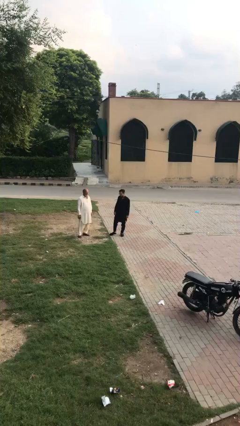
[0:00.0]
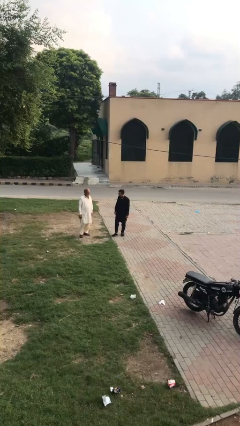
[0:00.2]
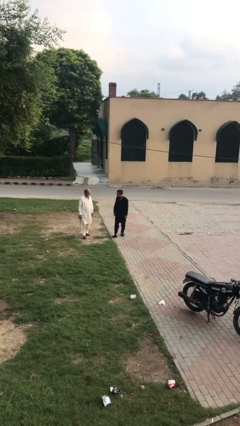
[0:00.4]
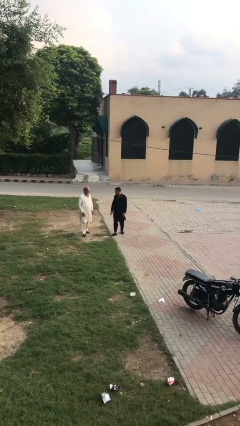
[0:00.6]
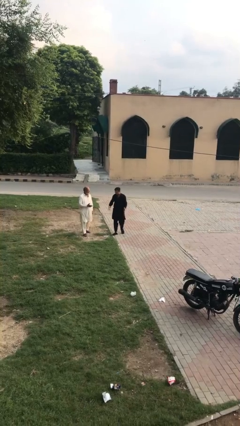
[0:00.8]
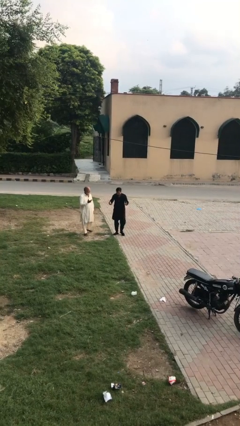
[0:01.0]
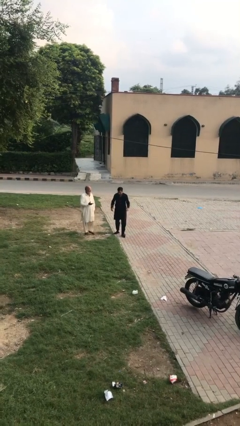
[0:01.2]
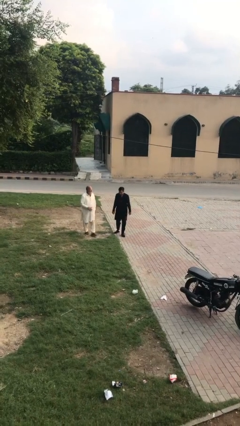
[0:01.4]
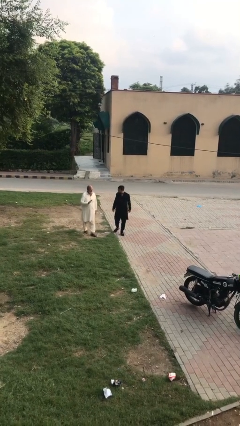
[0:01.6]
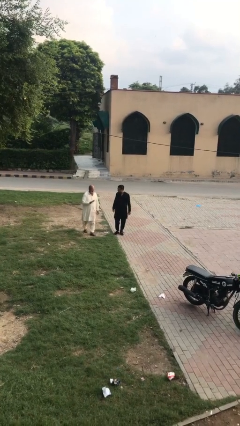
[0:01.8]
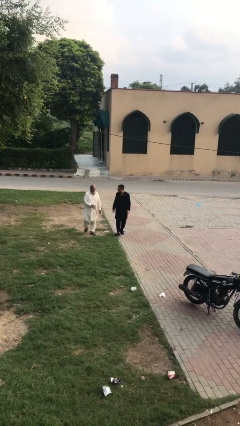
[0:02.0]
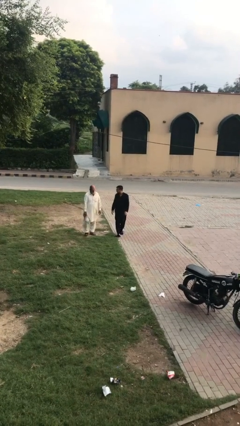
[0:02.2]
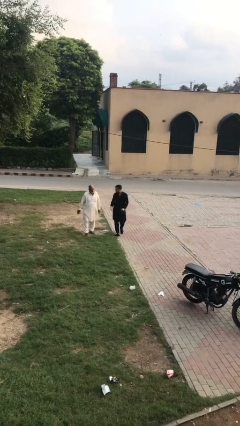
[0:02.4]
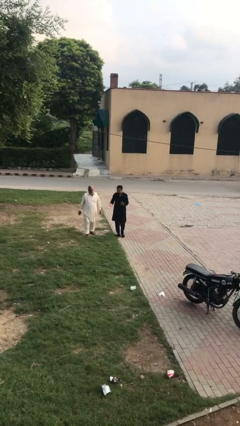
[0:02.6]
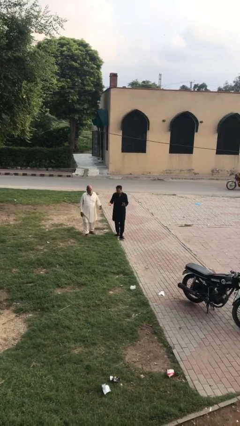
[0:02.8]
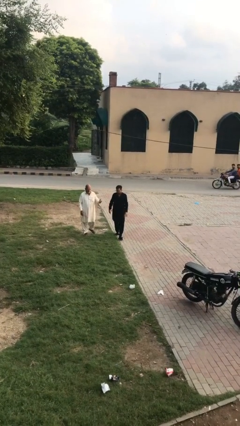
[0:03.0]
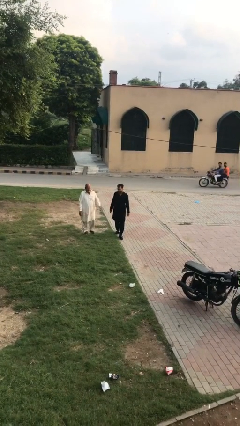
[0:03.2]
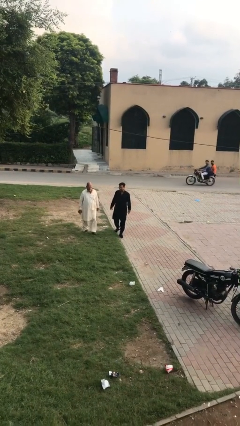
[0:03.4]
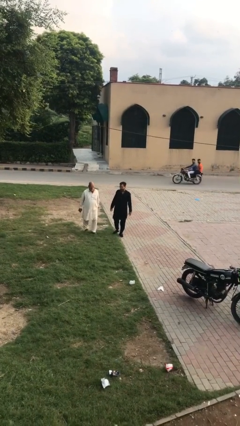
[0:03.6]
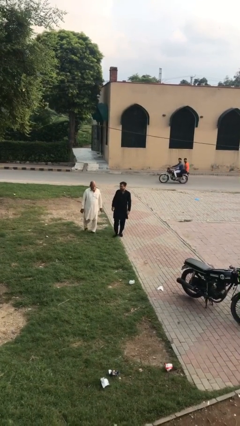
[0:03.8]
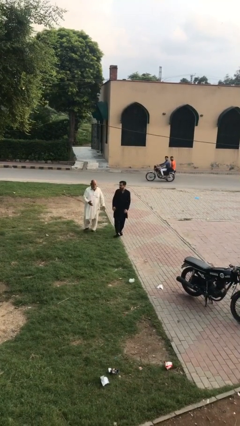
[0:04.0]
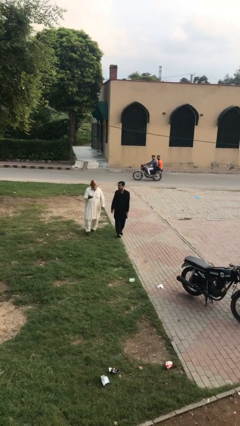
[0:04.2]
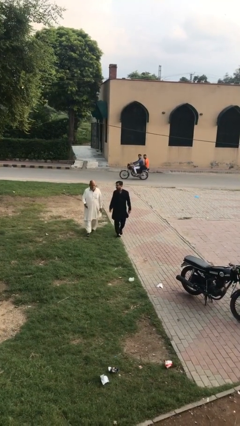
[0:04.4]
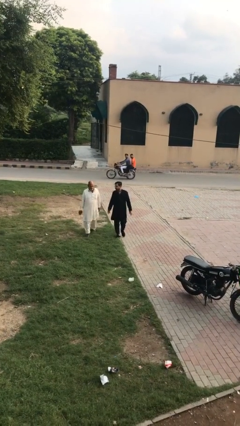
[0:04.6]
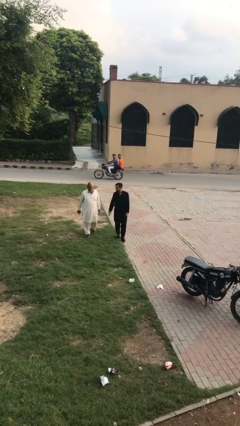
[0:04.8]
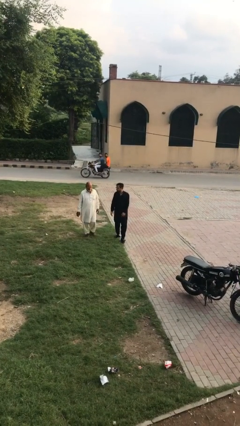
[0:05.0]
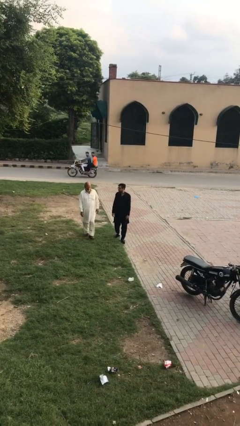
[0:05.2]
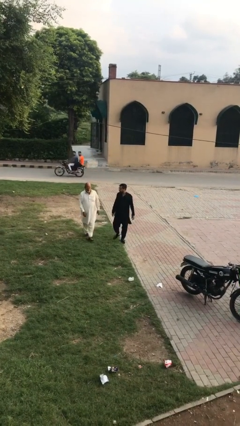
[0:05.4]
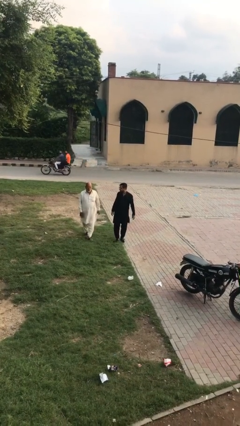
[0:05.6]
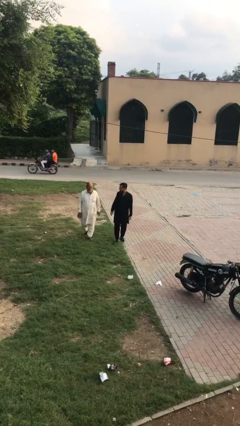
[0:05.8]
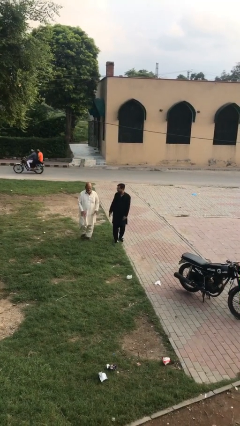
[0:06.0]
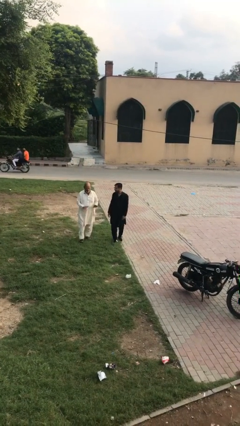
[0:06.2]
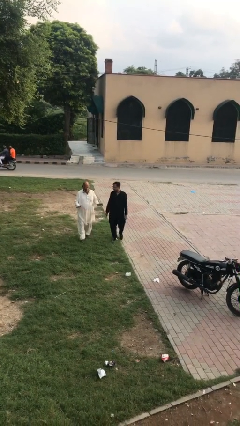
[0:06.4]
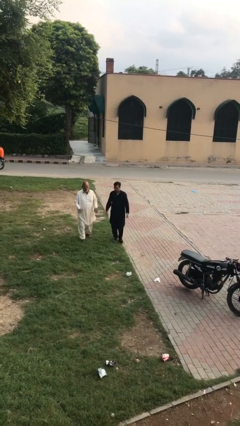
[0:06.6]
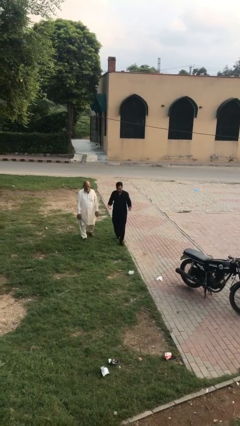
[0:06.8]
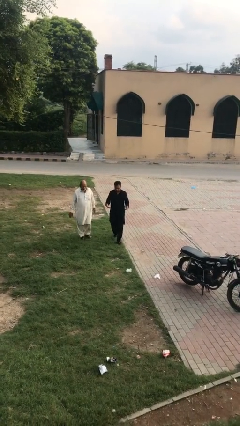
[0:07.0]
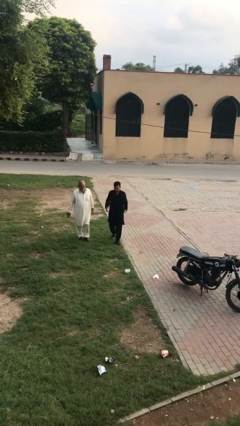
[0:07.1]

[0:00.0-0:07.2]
person talks to person

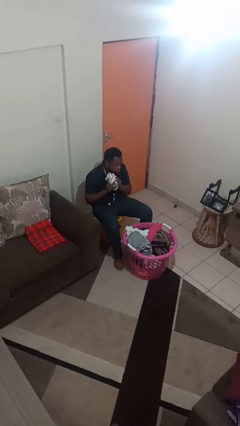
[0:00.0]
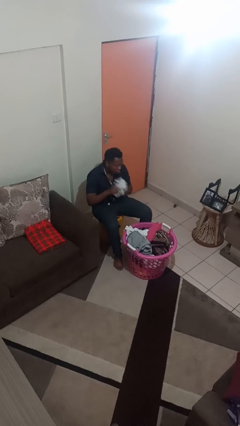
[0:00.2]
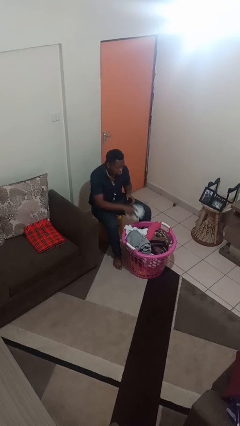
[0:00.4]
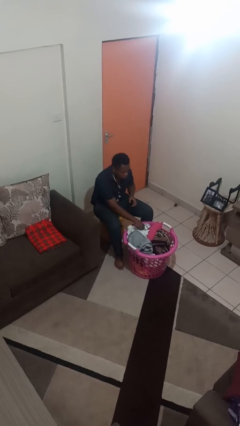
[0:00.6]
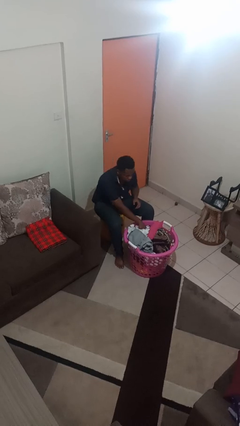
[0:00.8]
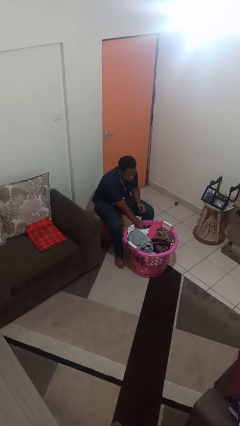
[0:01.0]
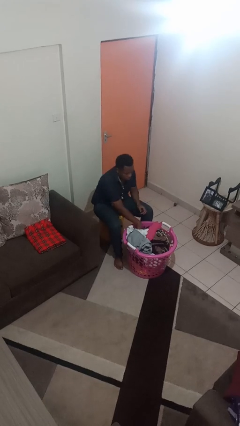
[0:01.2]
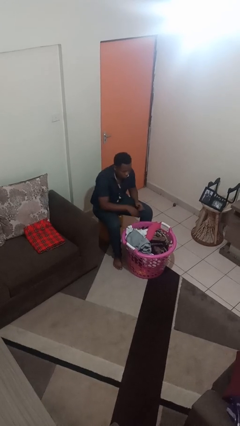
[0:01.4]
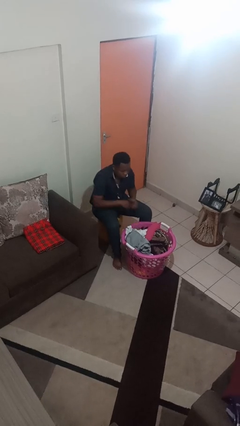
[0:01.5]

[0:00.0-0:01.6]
person puts object into basket

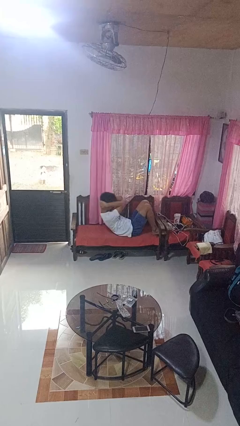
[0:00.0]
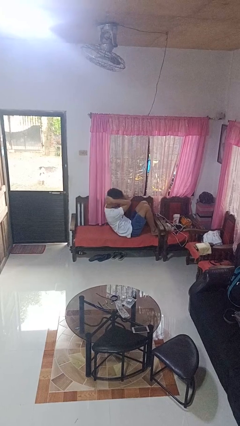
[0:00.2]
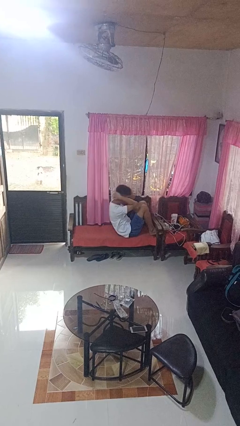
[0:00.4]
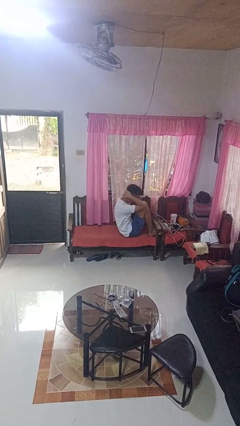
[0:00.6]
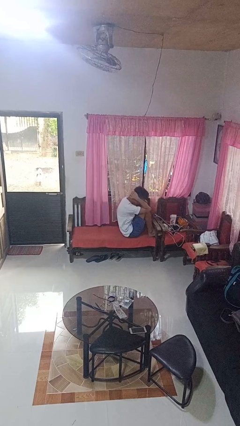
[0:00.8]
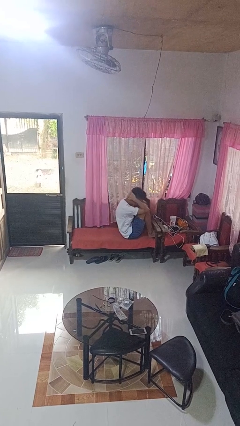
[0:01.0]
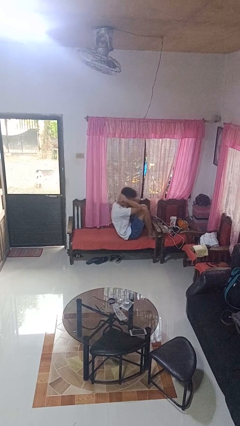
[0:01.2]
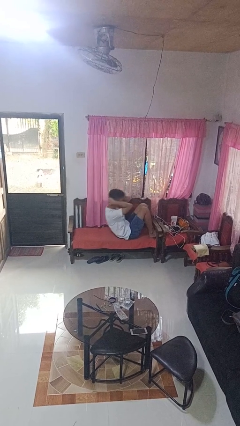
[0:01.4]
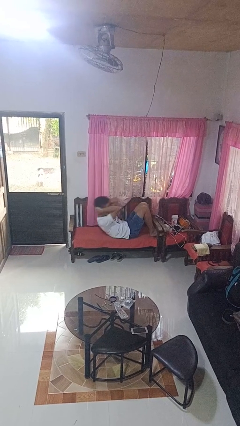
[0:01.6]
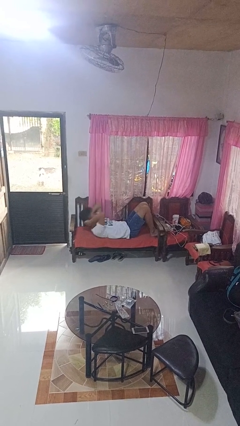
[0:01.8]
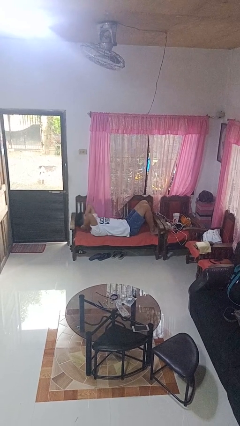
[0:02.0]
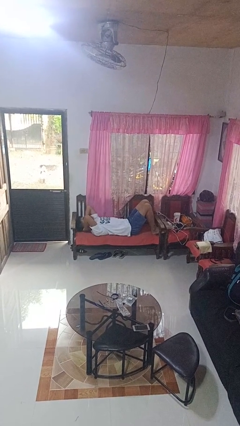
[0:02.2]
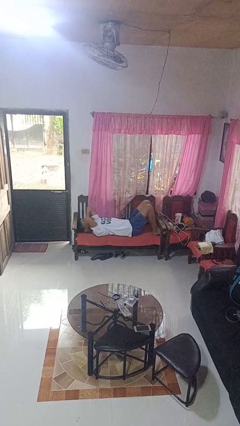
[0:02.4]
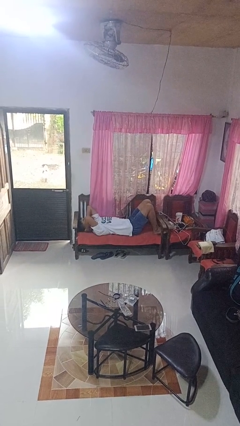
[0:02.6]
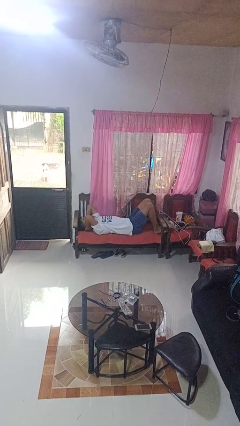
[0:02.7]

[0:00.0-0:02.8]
person exercises with situp

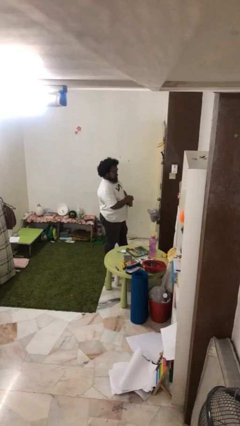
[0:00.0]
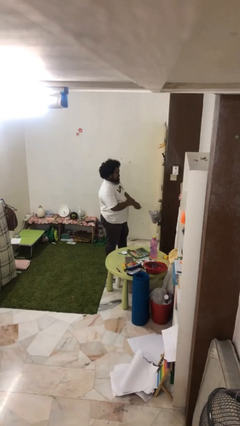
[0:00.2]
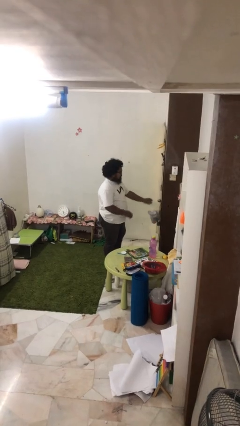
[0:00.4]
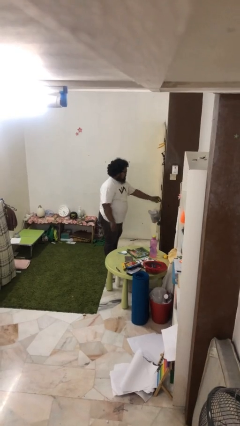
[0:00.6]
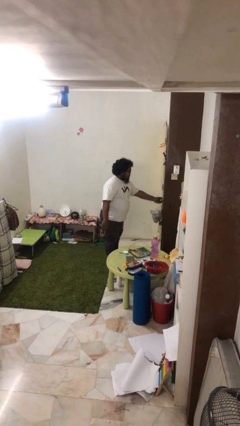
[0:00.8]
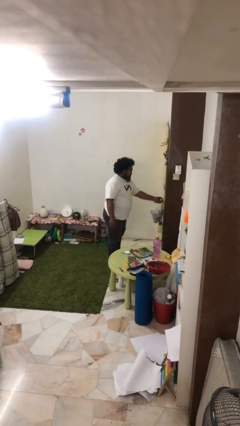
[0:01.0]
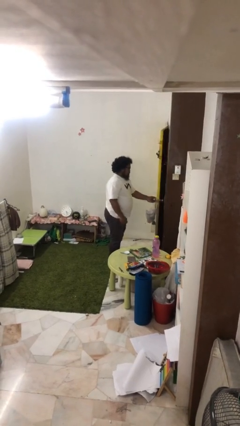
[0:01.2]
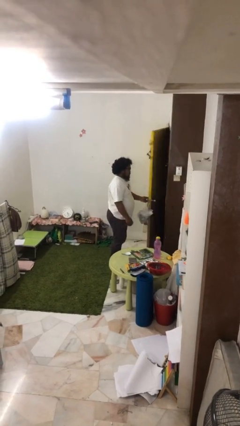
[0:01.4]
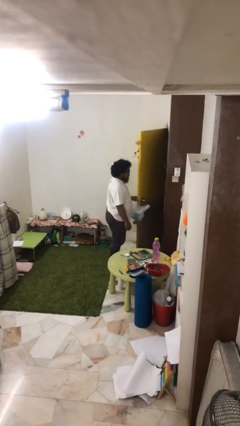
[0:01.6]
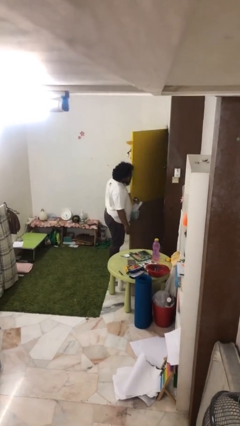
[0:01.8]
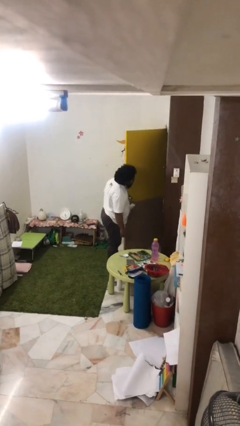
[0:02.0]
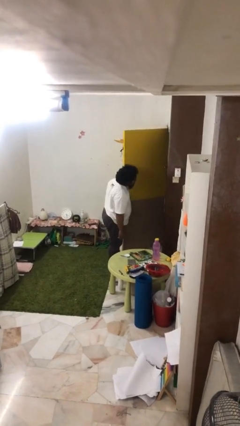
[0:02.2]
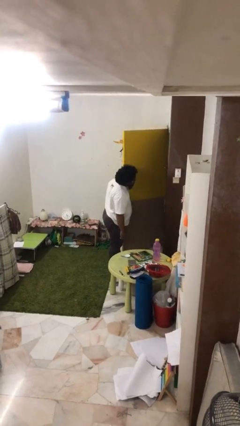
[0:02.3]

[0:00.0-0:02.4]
person opens facility door

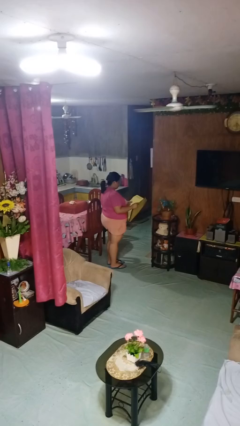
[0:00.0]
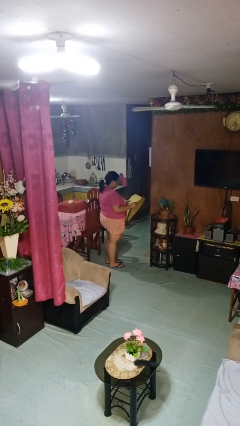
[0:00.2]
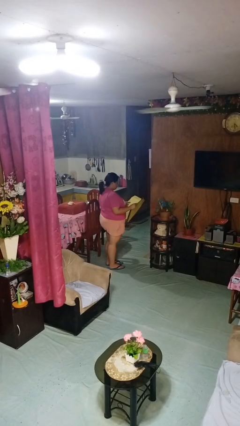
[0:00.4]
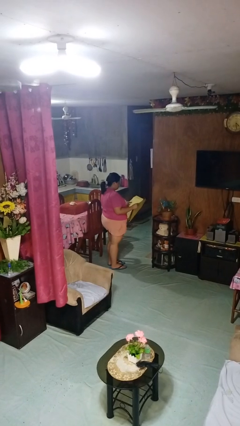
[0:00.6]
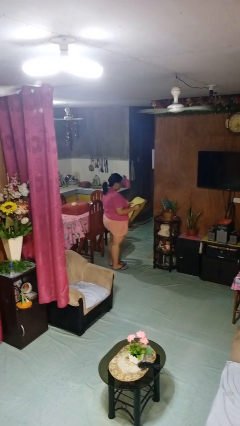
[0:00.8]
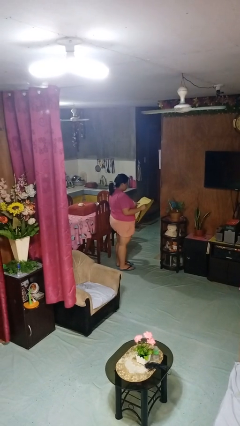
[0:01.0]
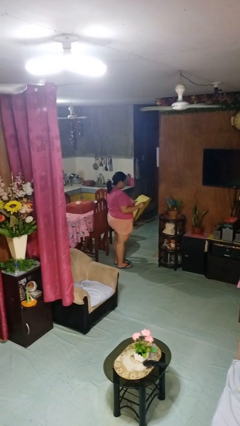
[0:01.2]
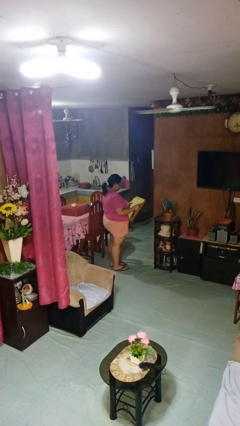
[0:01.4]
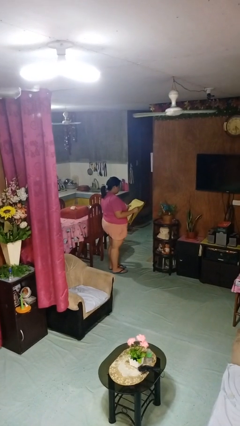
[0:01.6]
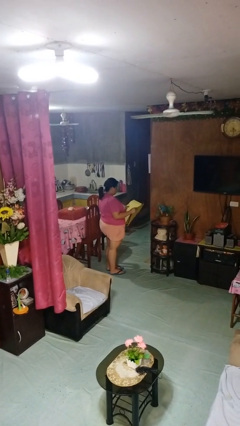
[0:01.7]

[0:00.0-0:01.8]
person reads newspaper

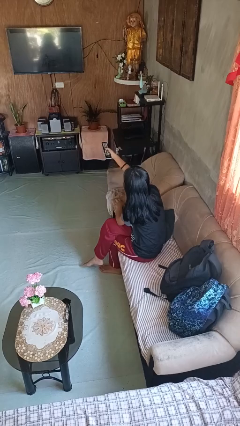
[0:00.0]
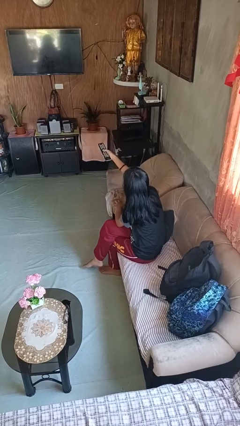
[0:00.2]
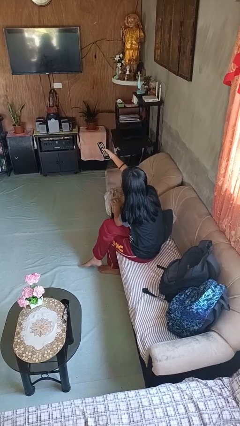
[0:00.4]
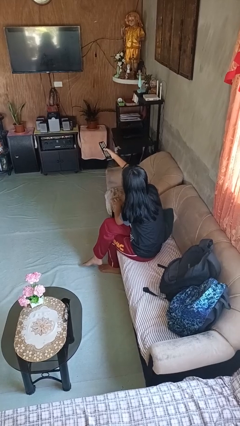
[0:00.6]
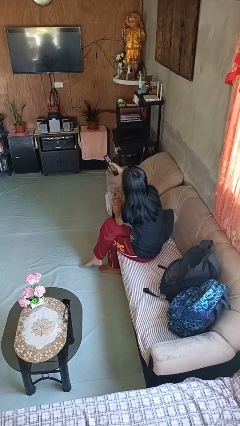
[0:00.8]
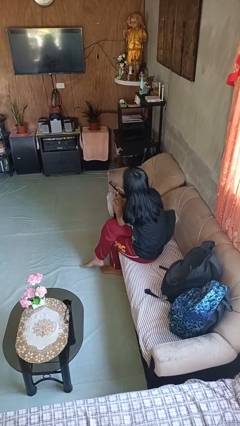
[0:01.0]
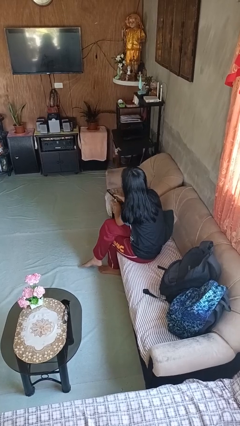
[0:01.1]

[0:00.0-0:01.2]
person uses television remote

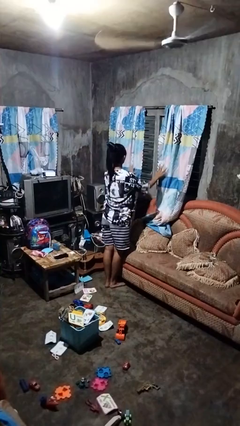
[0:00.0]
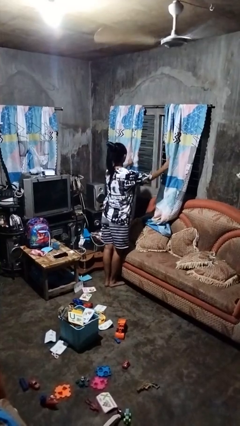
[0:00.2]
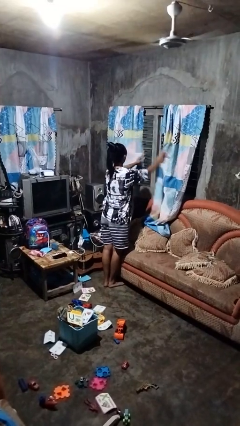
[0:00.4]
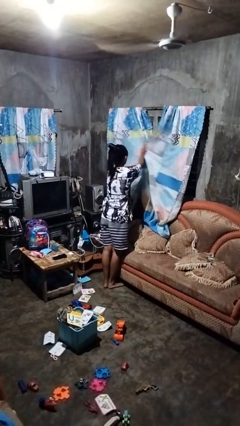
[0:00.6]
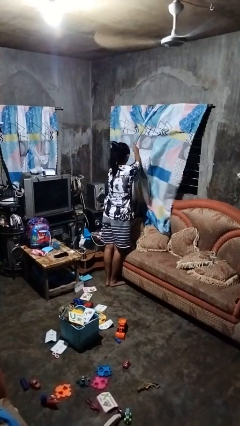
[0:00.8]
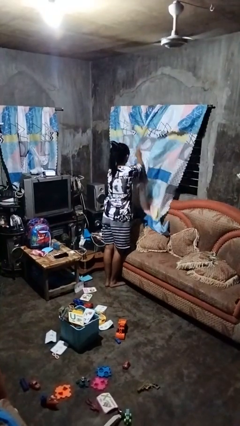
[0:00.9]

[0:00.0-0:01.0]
person closes curtains
